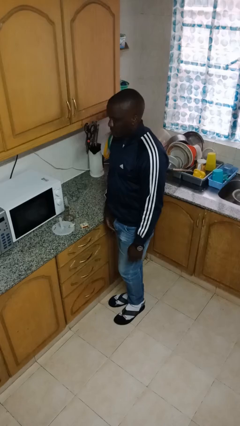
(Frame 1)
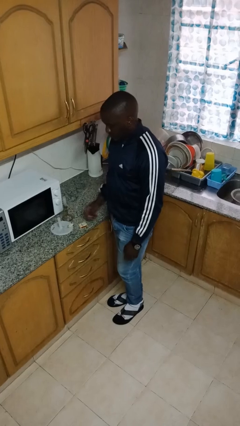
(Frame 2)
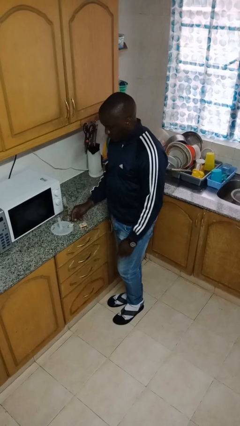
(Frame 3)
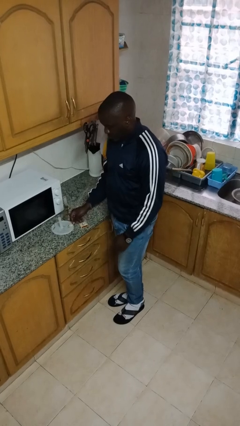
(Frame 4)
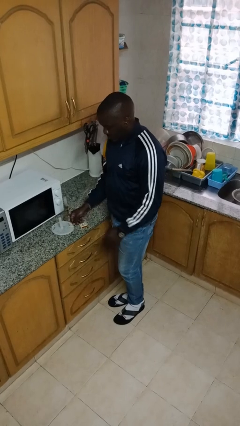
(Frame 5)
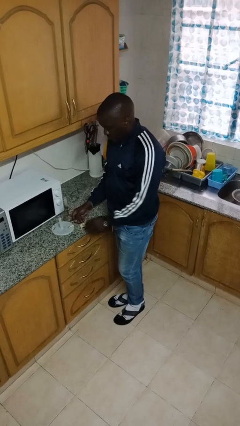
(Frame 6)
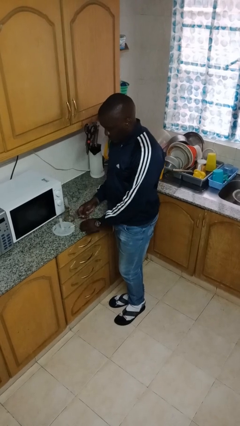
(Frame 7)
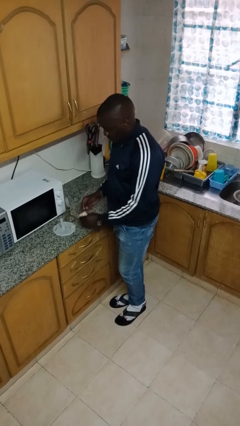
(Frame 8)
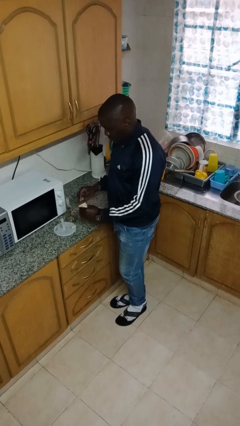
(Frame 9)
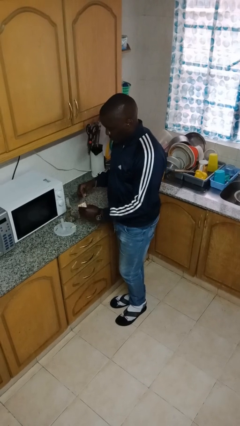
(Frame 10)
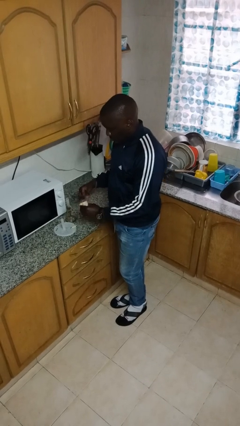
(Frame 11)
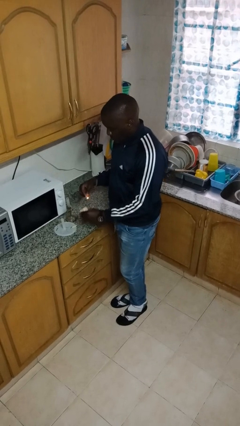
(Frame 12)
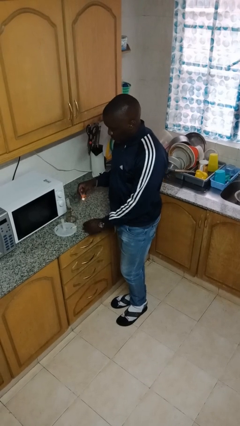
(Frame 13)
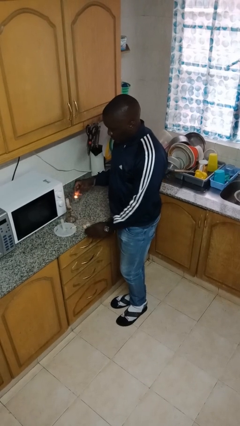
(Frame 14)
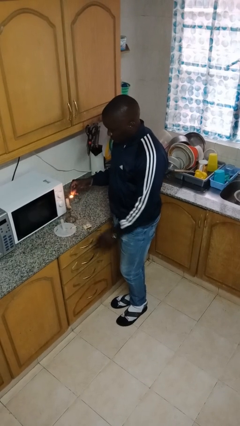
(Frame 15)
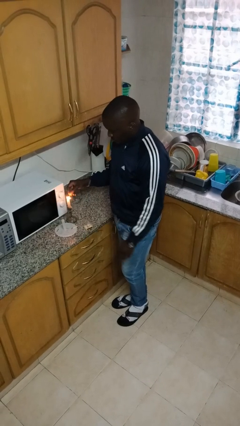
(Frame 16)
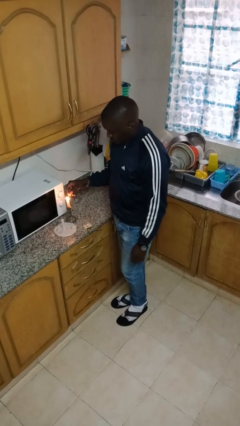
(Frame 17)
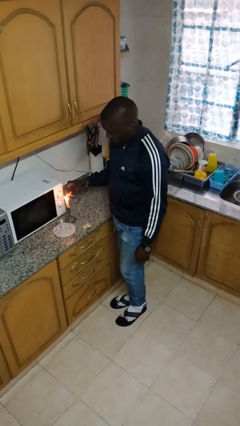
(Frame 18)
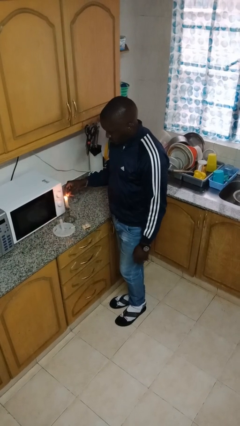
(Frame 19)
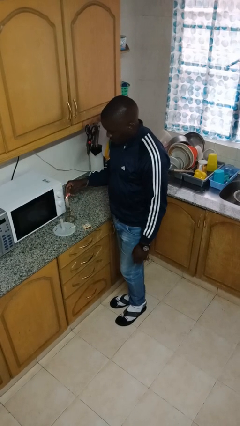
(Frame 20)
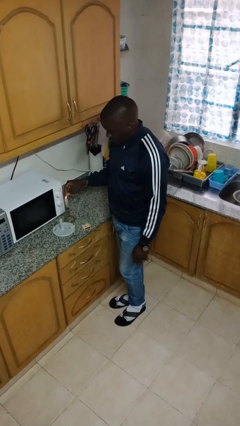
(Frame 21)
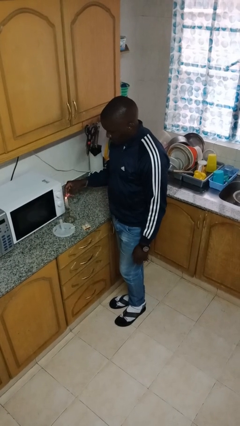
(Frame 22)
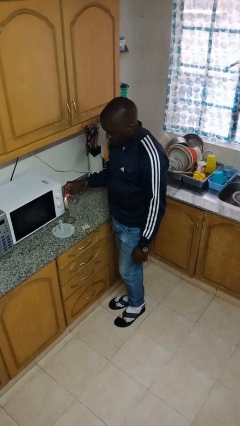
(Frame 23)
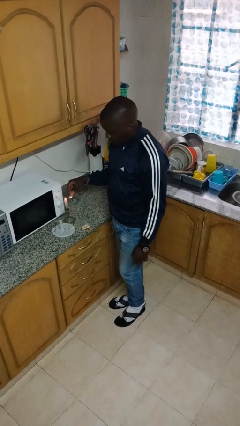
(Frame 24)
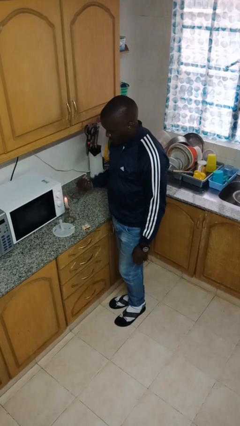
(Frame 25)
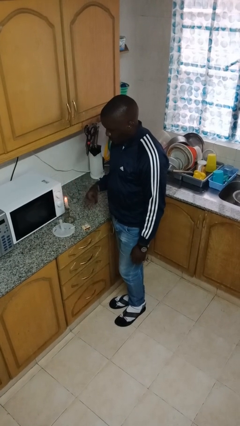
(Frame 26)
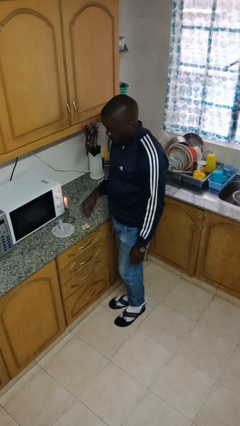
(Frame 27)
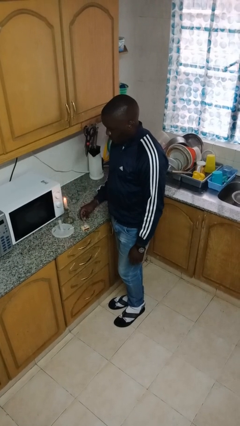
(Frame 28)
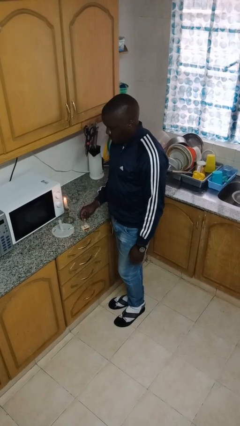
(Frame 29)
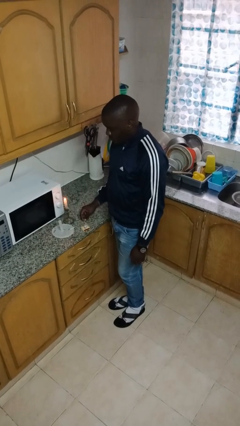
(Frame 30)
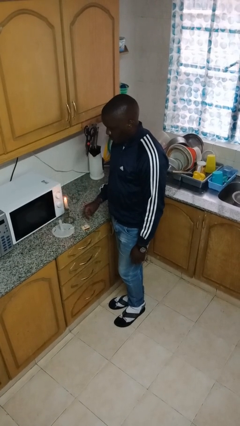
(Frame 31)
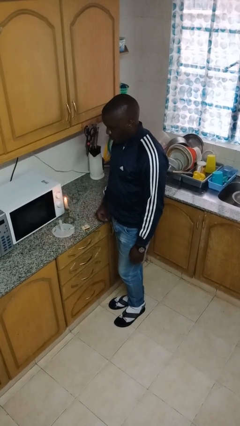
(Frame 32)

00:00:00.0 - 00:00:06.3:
person lights candle

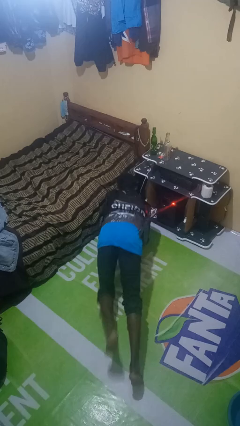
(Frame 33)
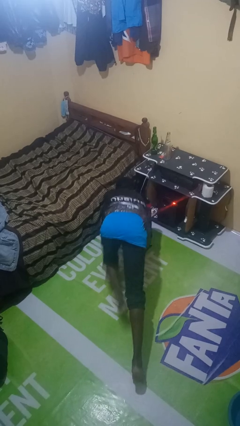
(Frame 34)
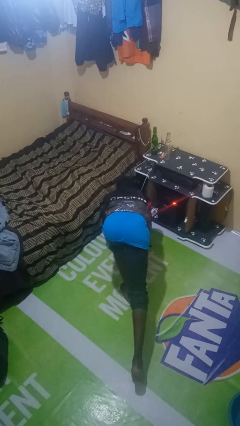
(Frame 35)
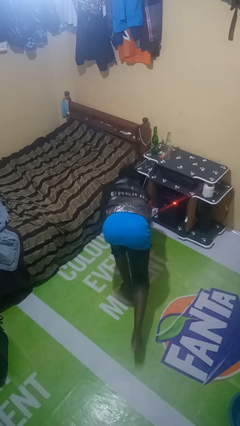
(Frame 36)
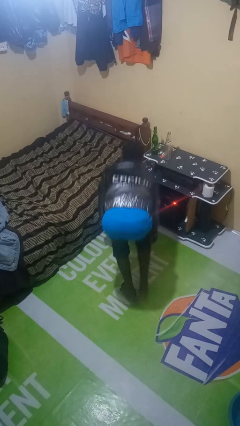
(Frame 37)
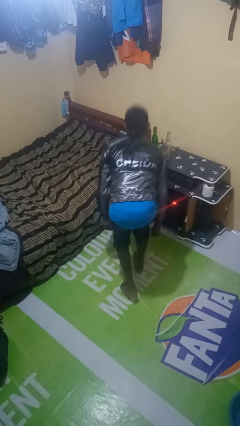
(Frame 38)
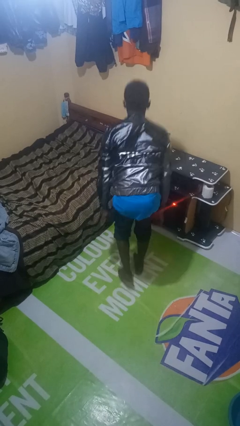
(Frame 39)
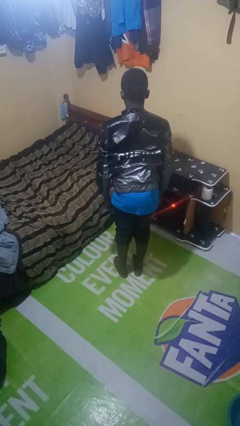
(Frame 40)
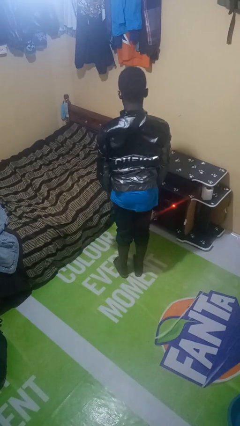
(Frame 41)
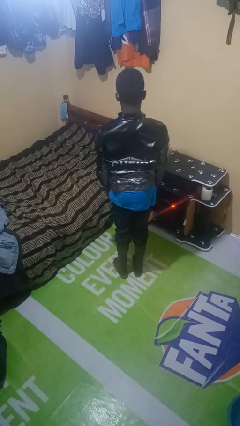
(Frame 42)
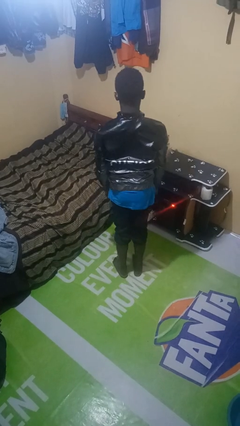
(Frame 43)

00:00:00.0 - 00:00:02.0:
person stands up from floor

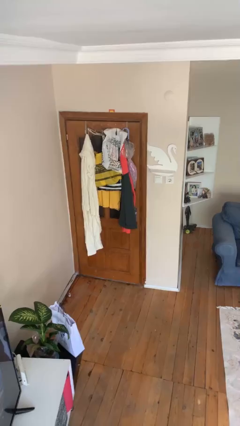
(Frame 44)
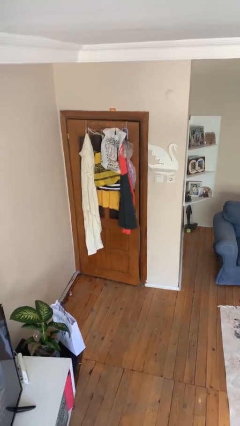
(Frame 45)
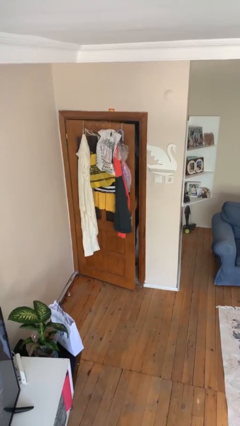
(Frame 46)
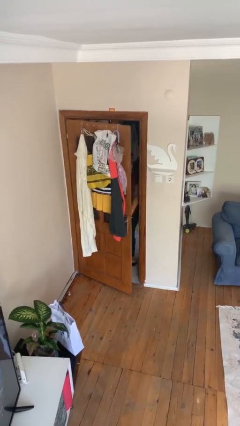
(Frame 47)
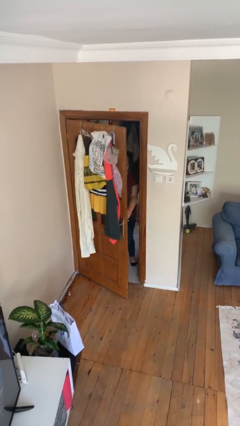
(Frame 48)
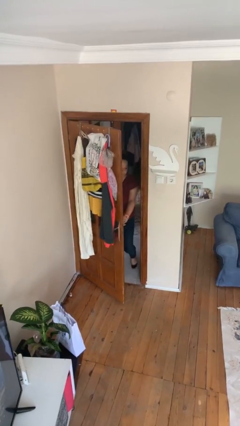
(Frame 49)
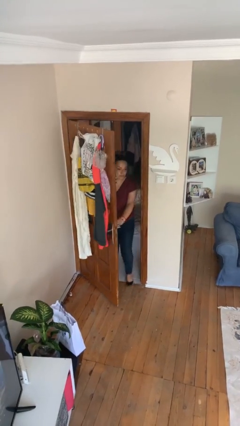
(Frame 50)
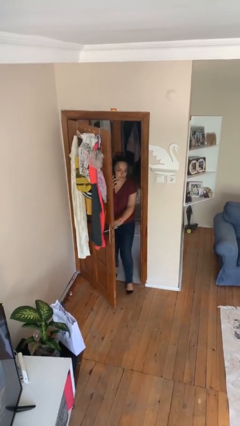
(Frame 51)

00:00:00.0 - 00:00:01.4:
person opens facility door

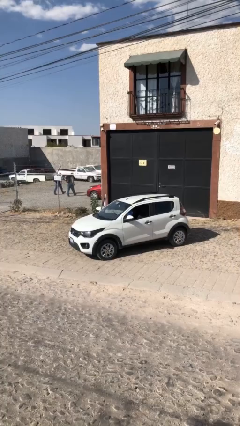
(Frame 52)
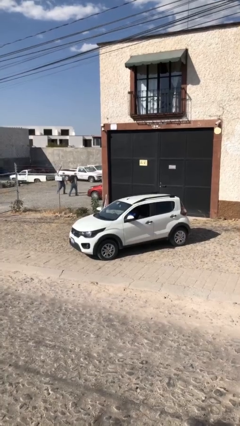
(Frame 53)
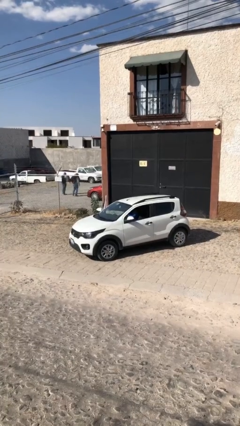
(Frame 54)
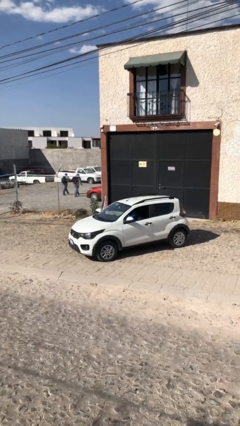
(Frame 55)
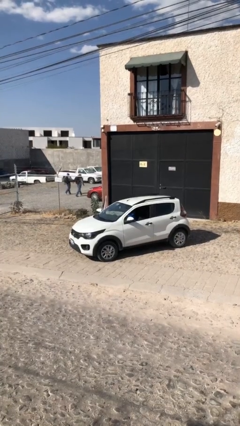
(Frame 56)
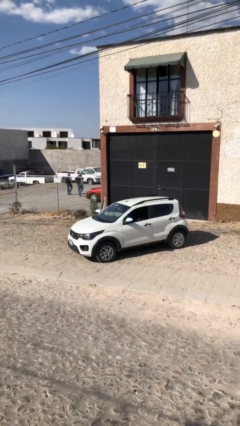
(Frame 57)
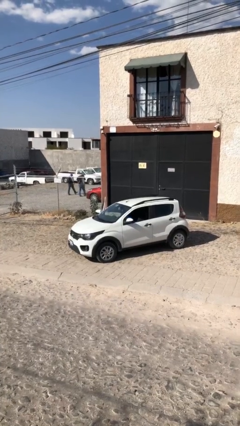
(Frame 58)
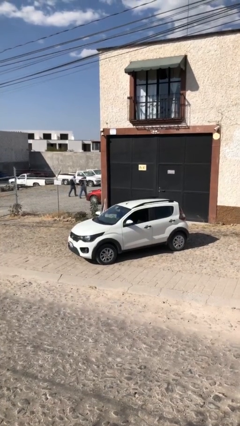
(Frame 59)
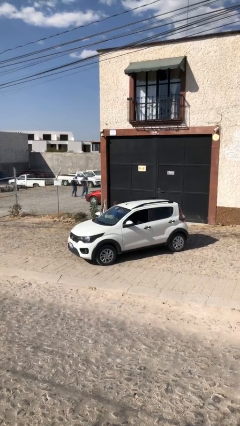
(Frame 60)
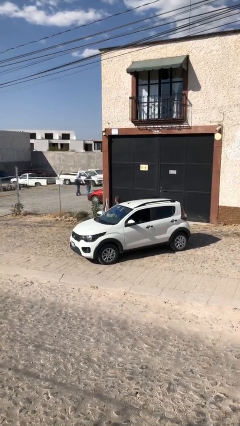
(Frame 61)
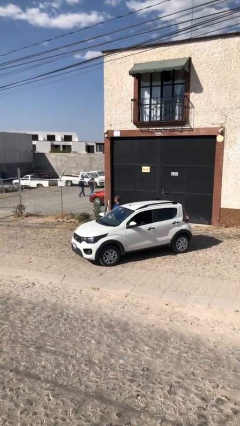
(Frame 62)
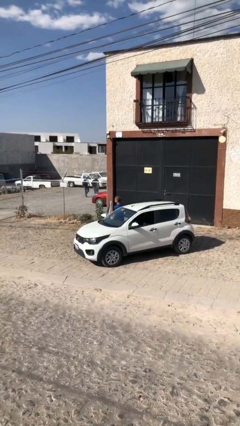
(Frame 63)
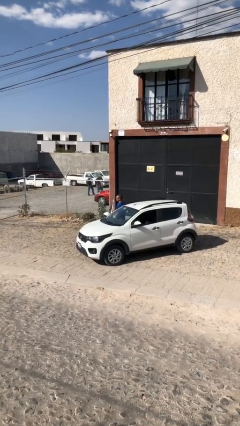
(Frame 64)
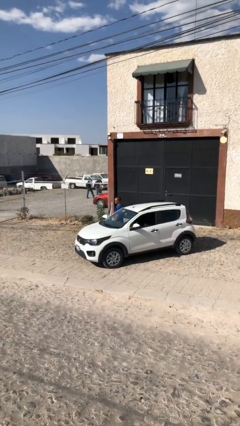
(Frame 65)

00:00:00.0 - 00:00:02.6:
person exits car

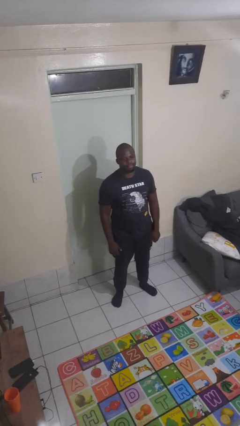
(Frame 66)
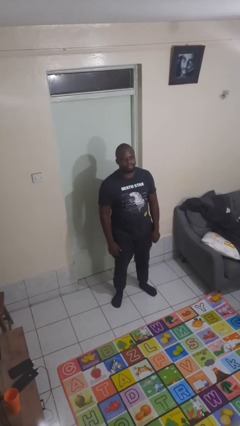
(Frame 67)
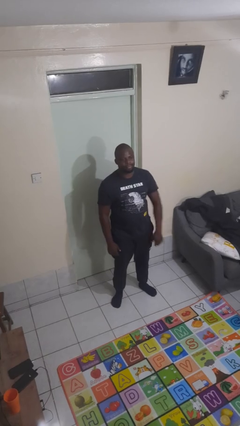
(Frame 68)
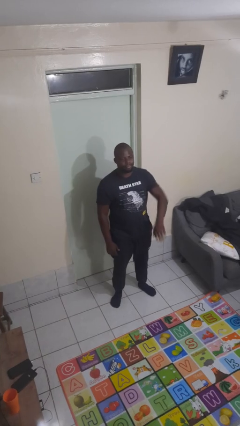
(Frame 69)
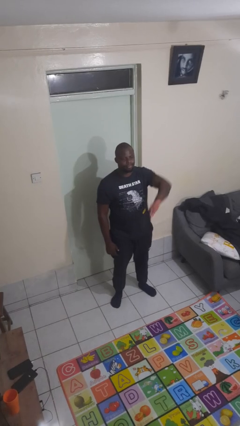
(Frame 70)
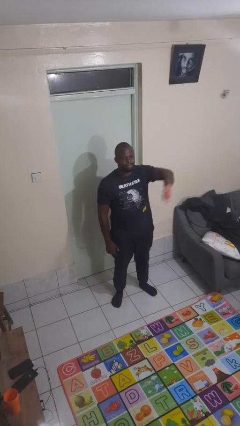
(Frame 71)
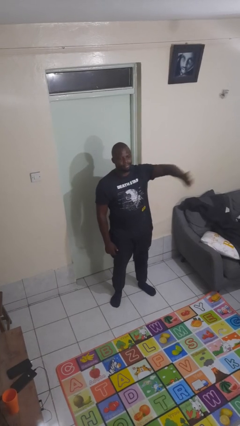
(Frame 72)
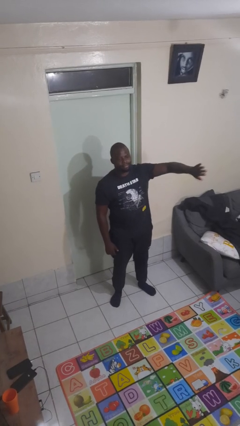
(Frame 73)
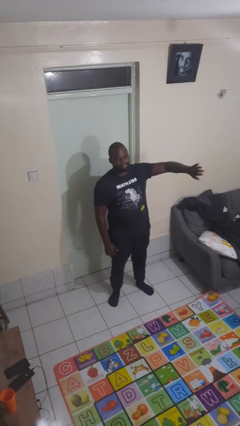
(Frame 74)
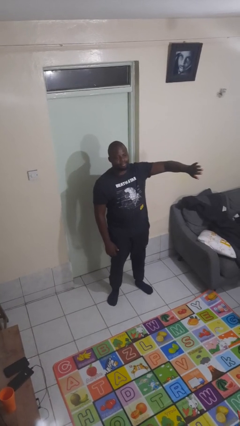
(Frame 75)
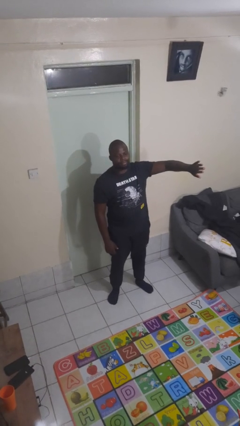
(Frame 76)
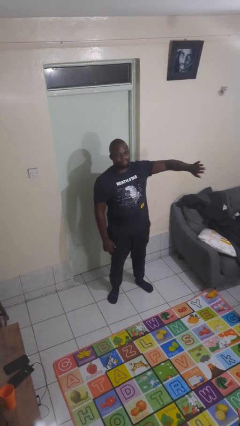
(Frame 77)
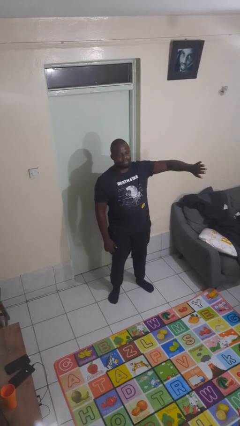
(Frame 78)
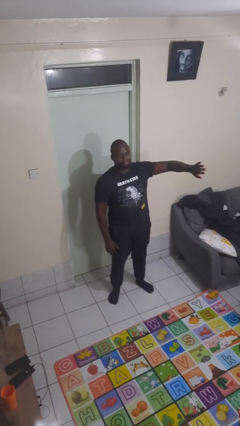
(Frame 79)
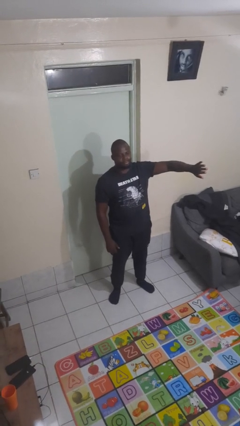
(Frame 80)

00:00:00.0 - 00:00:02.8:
person gestures swipe left

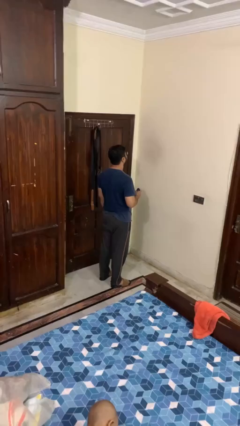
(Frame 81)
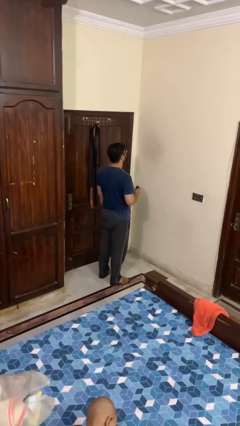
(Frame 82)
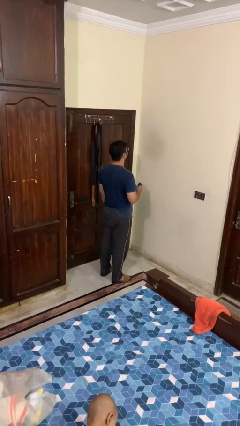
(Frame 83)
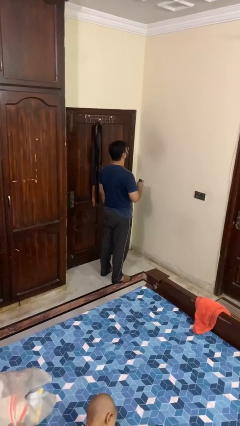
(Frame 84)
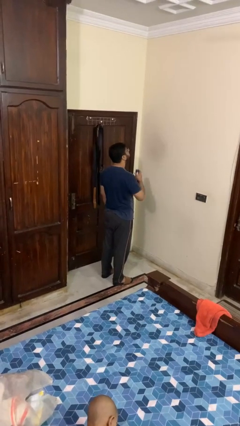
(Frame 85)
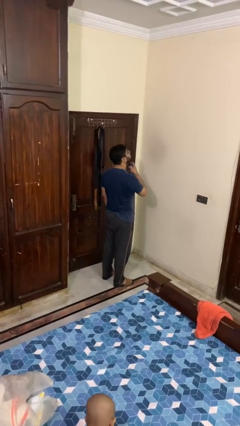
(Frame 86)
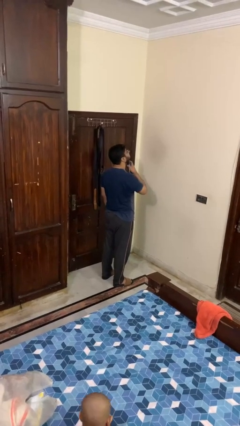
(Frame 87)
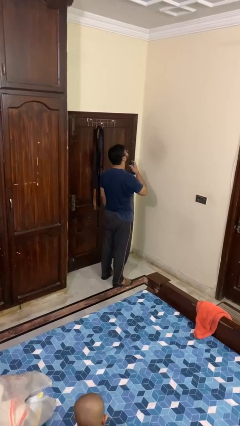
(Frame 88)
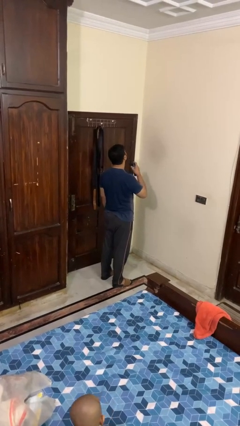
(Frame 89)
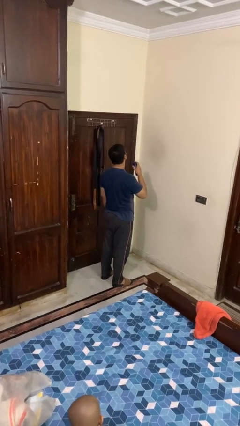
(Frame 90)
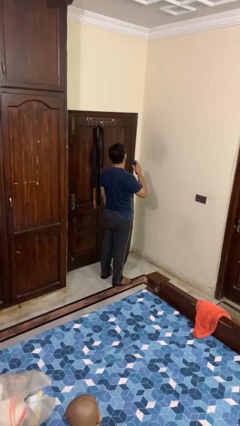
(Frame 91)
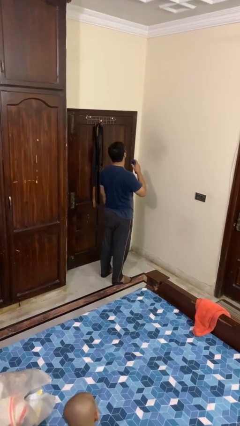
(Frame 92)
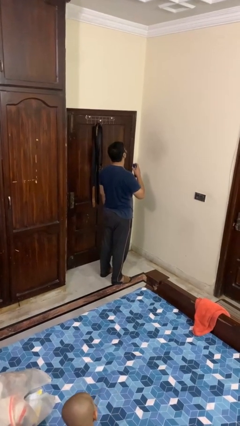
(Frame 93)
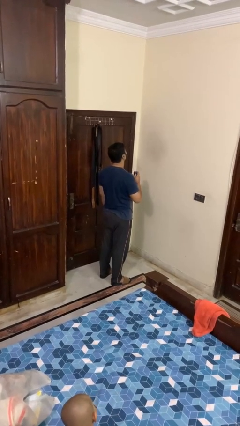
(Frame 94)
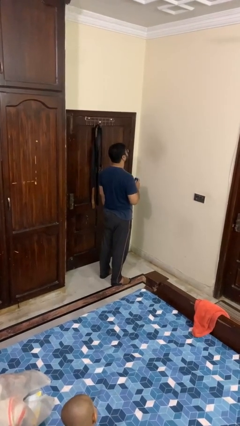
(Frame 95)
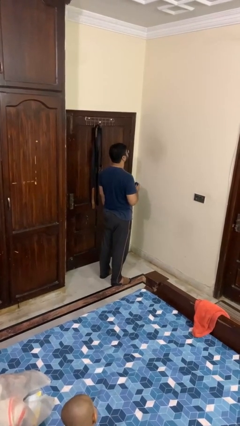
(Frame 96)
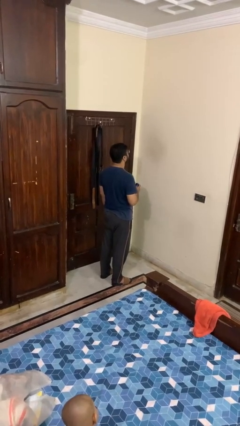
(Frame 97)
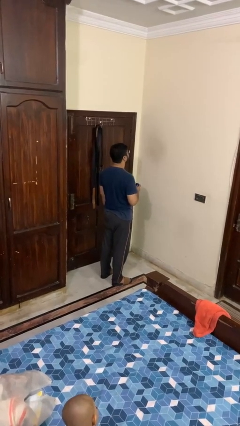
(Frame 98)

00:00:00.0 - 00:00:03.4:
person applies deodorant
